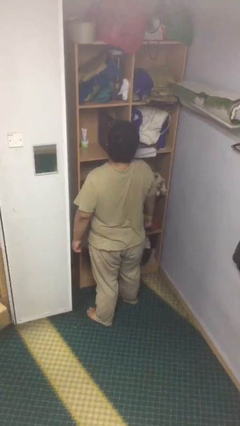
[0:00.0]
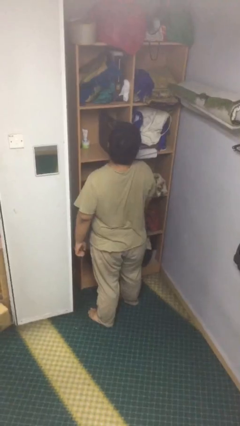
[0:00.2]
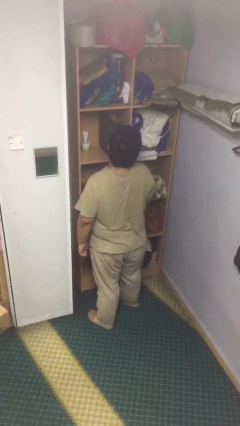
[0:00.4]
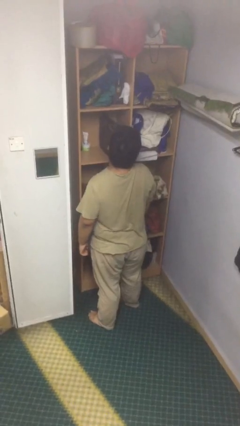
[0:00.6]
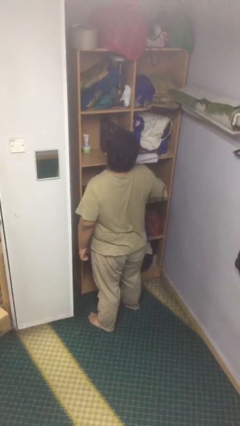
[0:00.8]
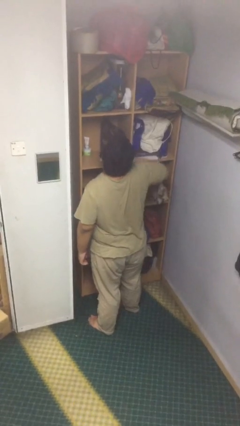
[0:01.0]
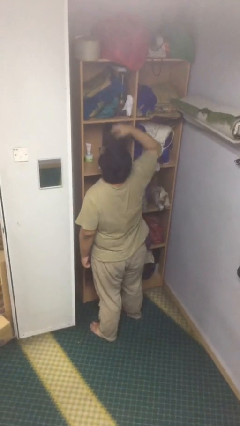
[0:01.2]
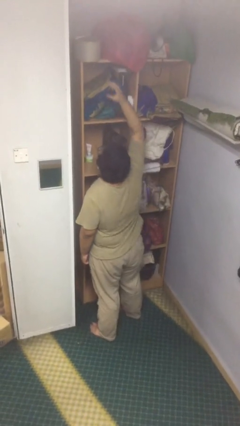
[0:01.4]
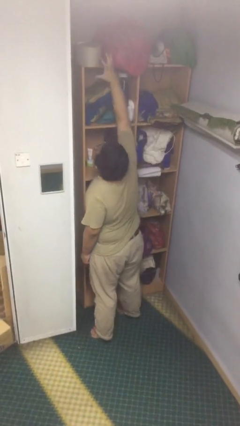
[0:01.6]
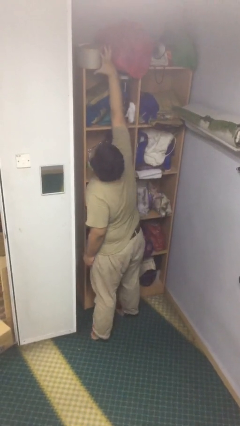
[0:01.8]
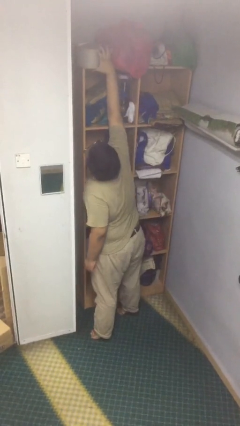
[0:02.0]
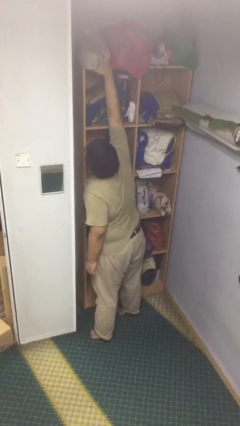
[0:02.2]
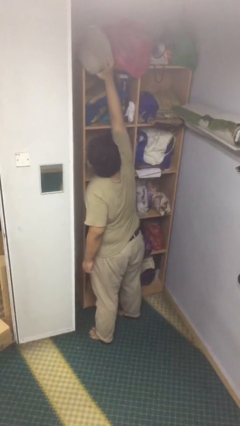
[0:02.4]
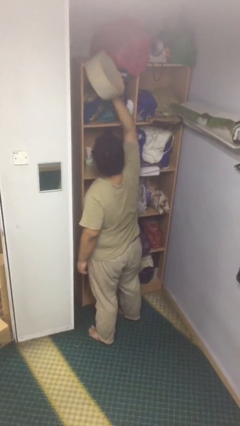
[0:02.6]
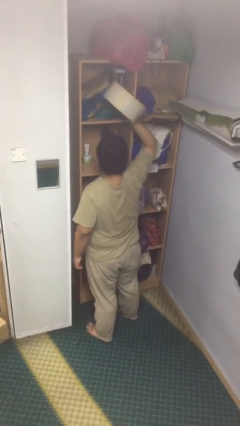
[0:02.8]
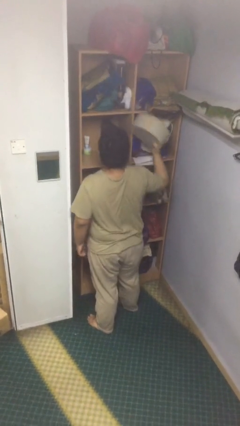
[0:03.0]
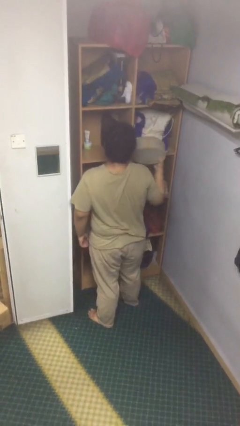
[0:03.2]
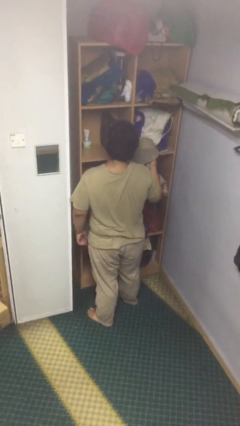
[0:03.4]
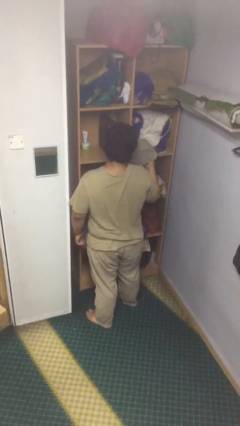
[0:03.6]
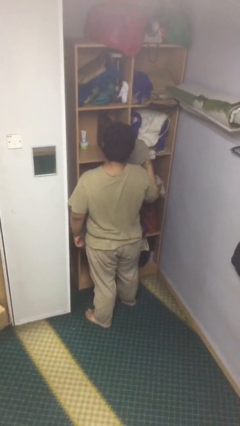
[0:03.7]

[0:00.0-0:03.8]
person picks up object from shelf

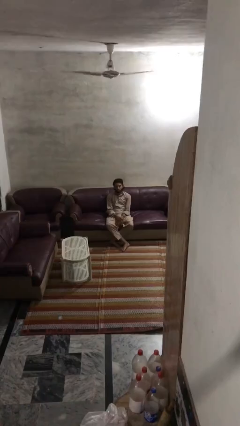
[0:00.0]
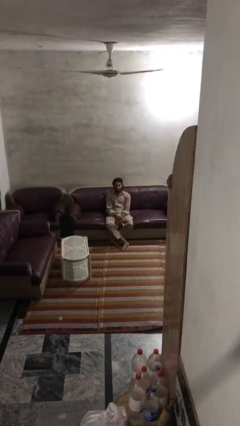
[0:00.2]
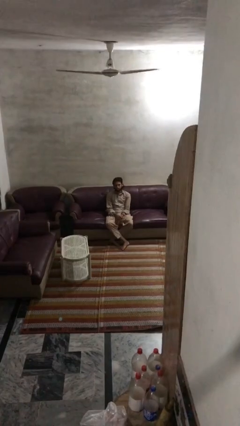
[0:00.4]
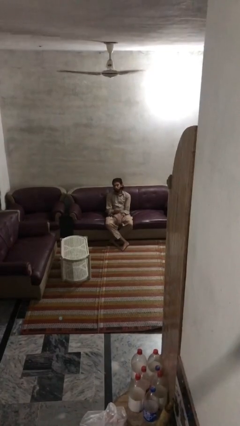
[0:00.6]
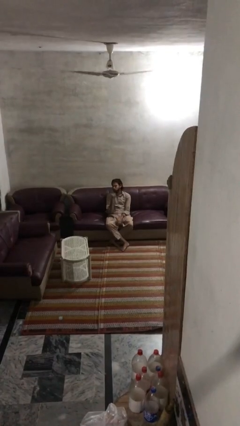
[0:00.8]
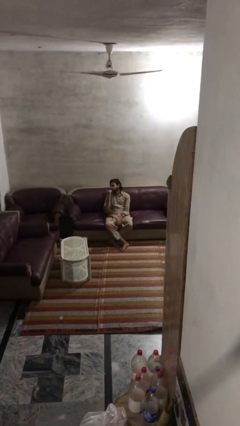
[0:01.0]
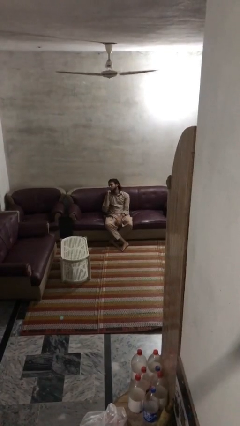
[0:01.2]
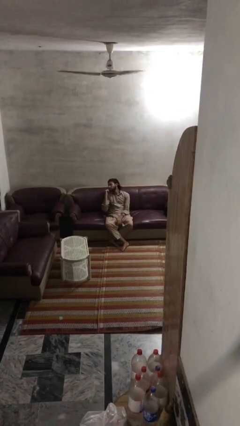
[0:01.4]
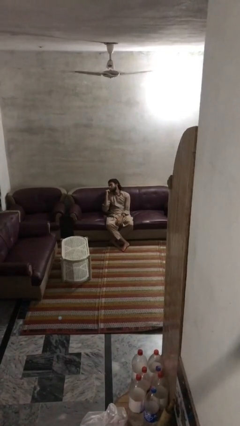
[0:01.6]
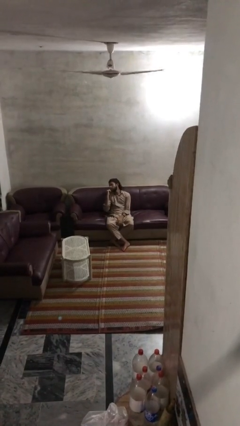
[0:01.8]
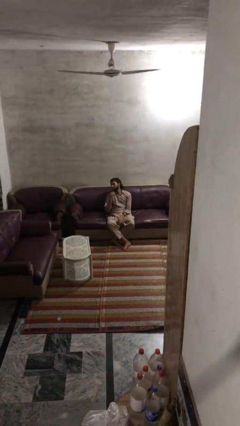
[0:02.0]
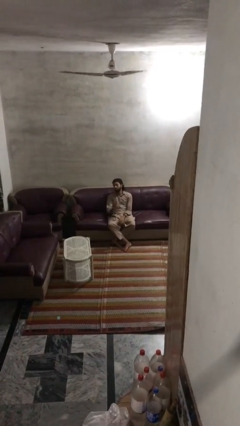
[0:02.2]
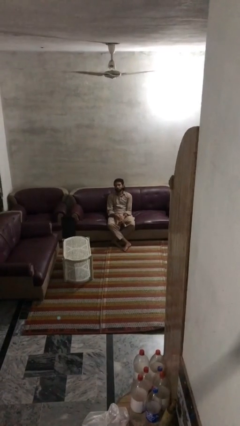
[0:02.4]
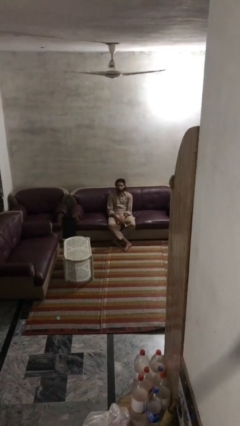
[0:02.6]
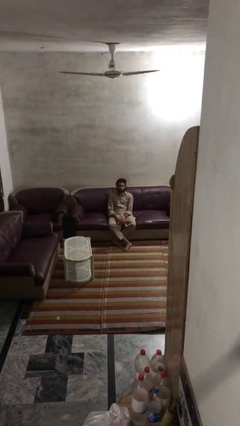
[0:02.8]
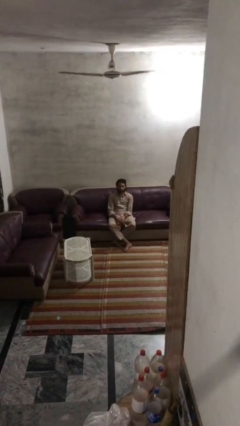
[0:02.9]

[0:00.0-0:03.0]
person gestures behind me

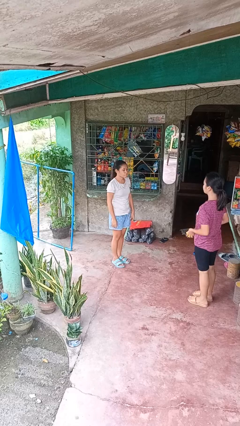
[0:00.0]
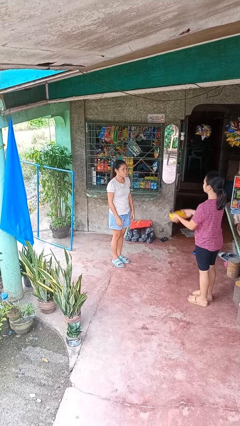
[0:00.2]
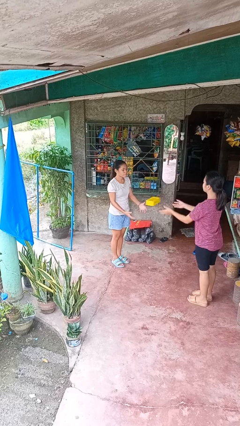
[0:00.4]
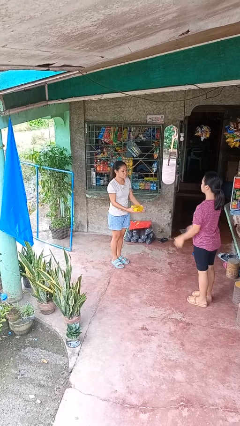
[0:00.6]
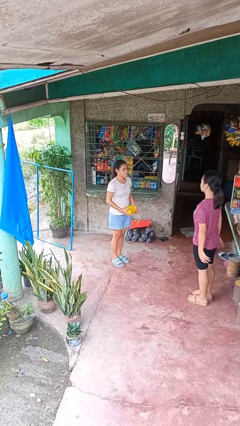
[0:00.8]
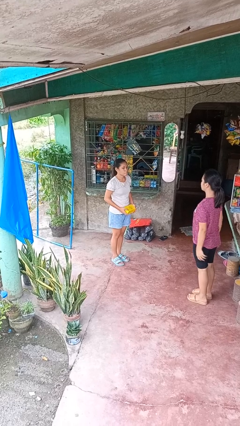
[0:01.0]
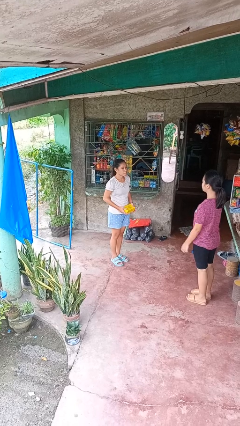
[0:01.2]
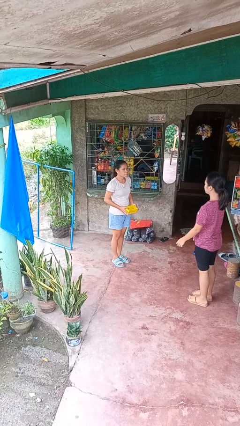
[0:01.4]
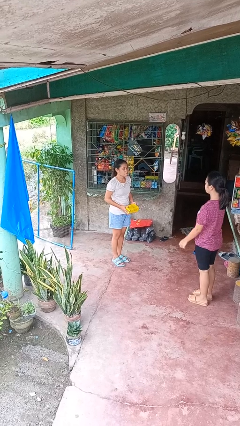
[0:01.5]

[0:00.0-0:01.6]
person catches object from person

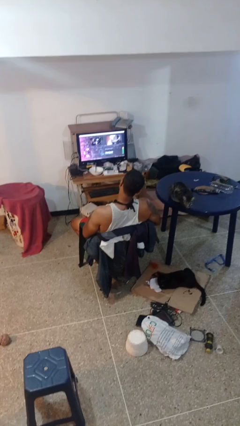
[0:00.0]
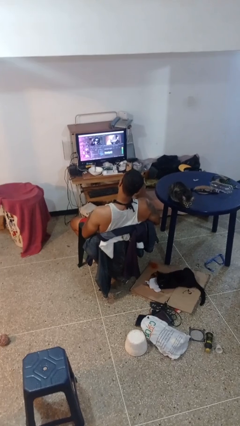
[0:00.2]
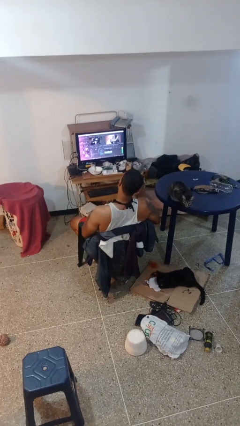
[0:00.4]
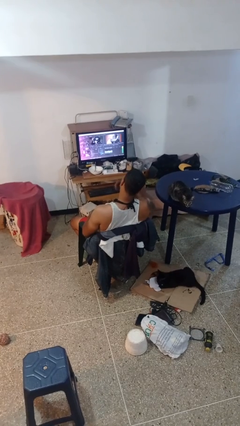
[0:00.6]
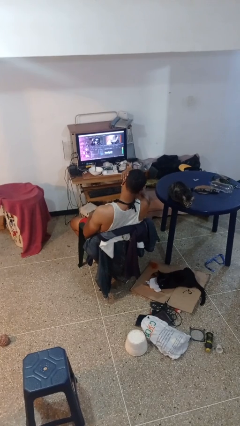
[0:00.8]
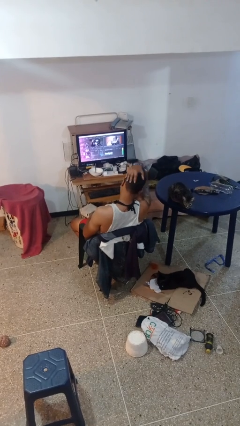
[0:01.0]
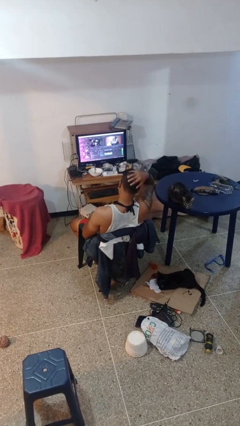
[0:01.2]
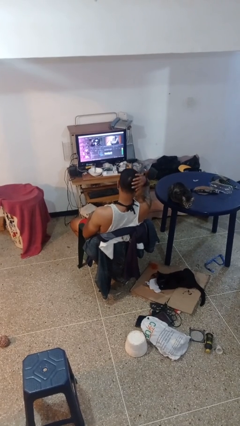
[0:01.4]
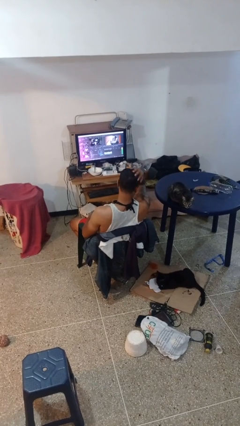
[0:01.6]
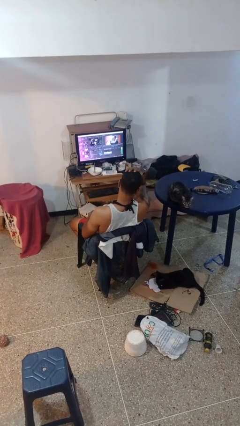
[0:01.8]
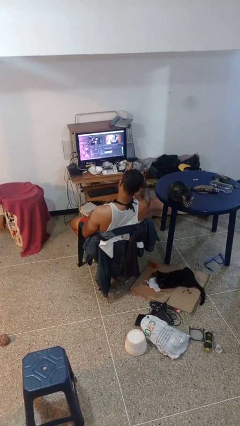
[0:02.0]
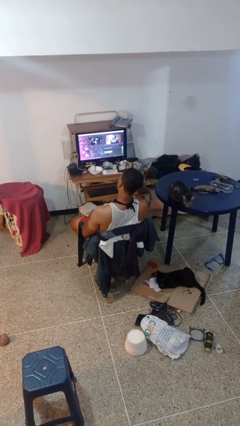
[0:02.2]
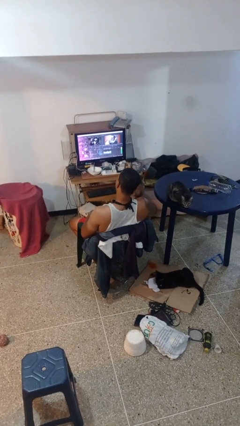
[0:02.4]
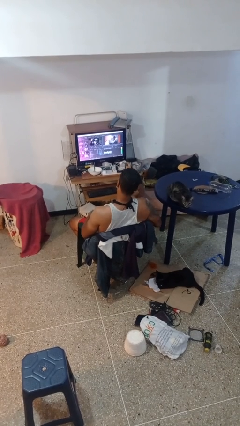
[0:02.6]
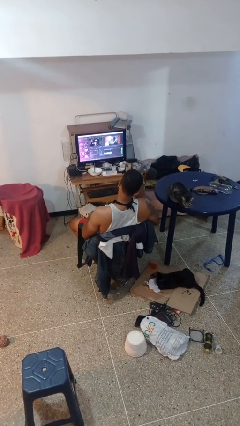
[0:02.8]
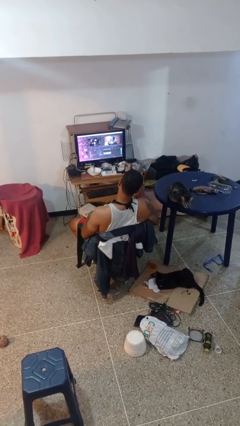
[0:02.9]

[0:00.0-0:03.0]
person strokes hair

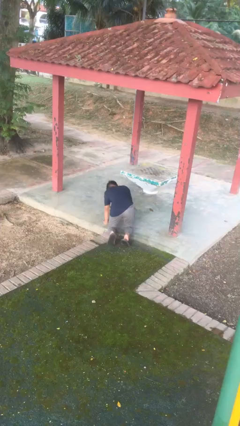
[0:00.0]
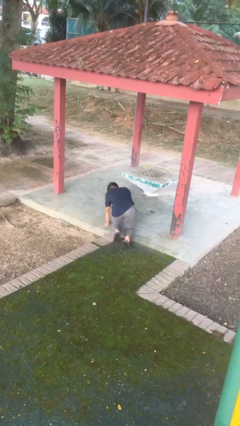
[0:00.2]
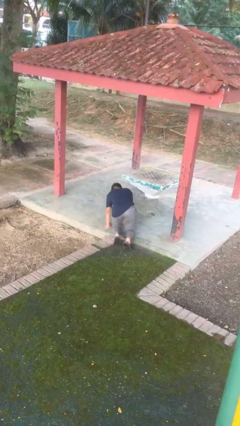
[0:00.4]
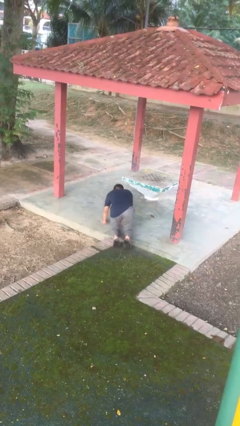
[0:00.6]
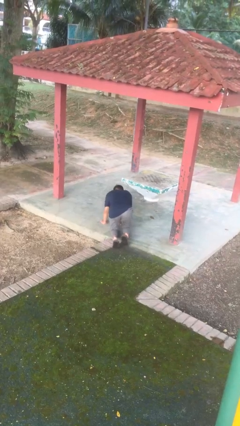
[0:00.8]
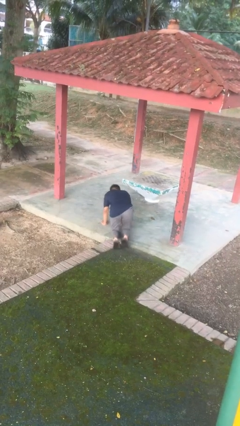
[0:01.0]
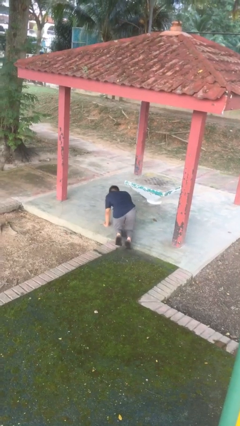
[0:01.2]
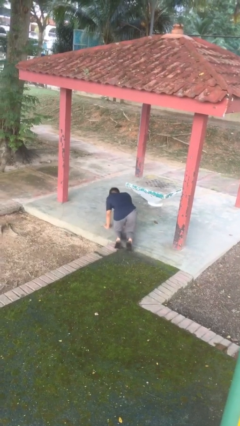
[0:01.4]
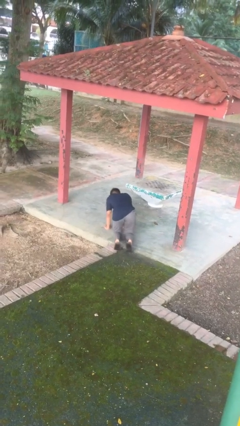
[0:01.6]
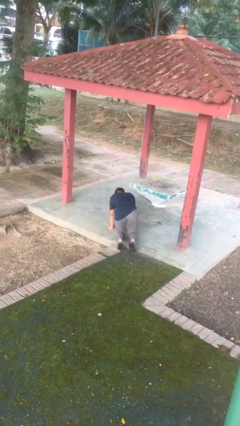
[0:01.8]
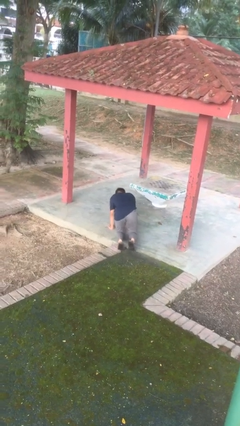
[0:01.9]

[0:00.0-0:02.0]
person crawls

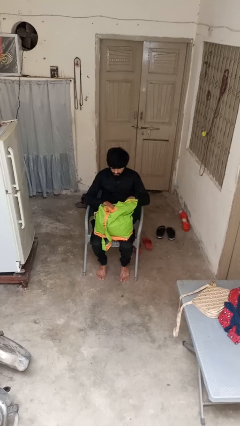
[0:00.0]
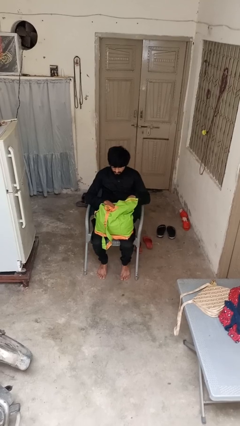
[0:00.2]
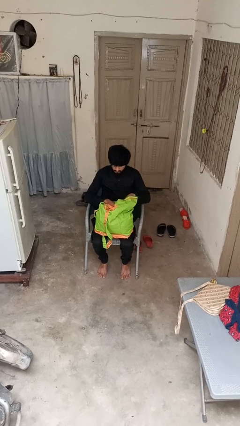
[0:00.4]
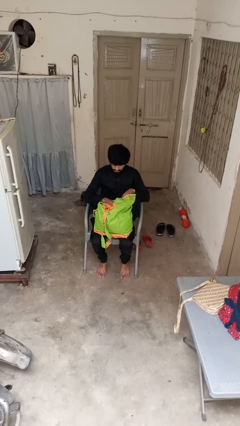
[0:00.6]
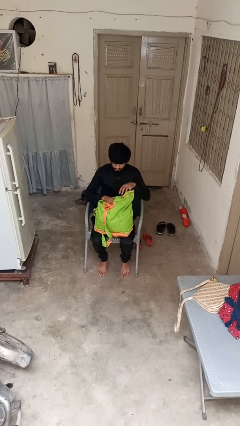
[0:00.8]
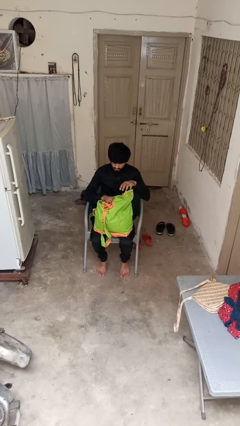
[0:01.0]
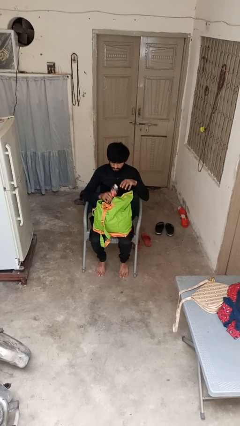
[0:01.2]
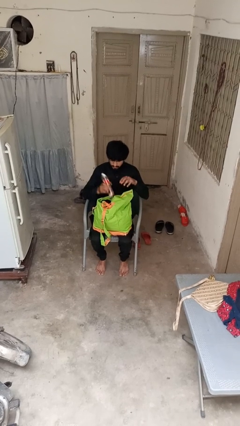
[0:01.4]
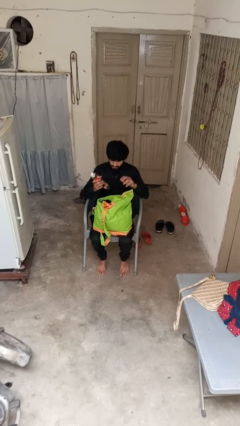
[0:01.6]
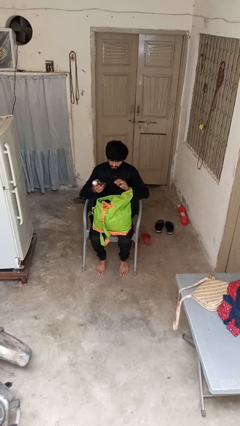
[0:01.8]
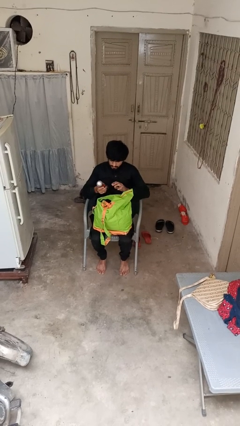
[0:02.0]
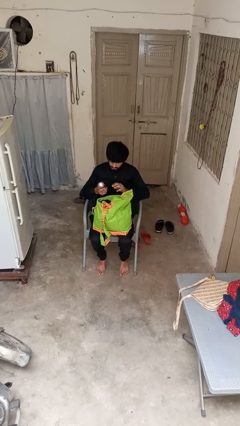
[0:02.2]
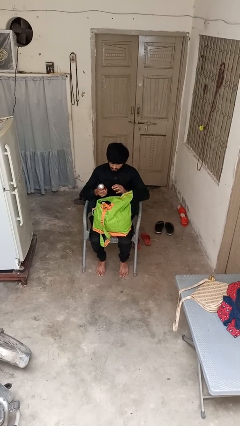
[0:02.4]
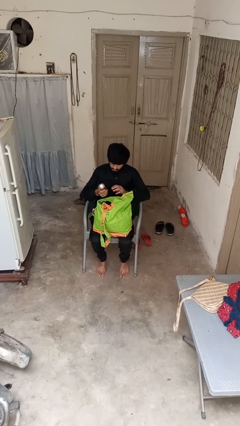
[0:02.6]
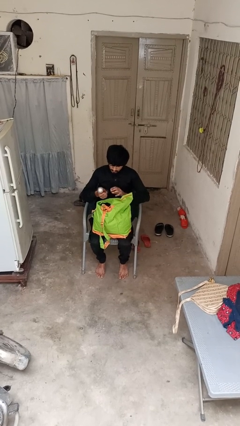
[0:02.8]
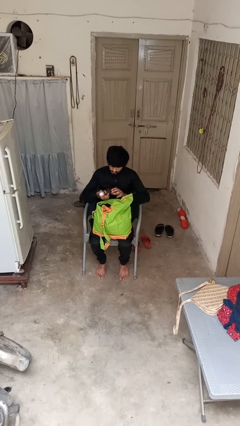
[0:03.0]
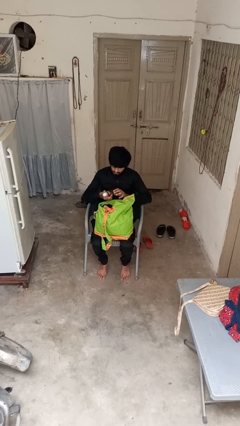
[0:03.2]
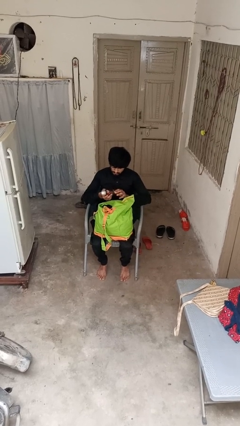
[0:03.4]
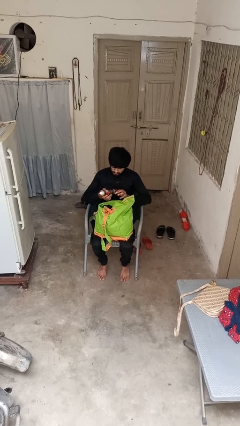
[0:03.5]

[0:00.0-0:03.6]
person takes object from backpack

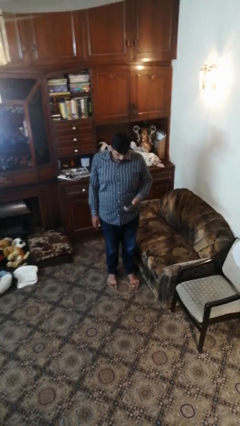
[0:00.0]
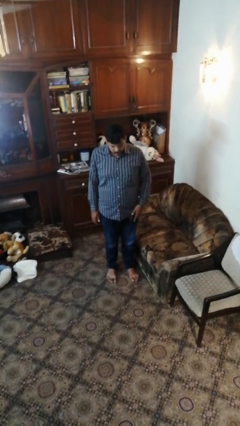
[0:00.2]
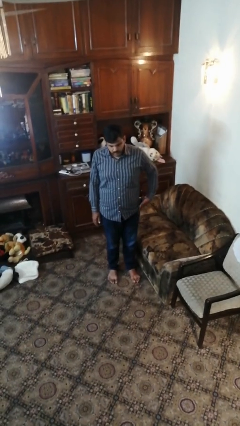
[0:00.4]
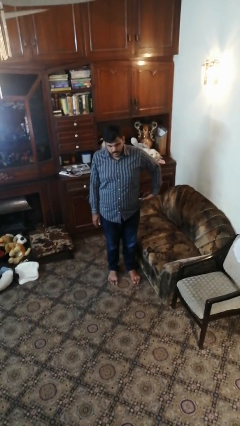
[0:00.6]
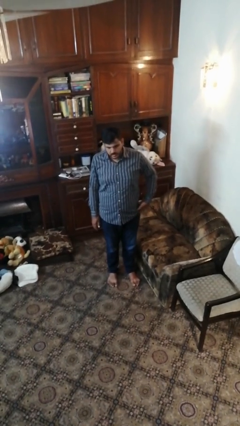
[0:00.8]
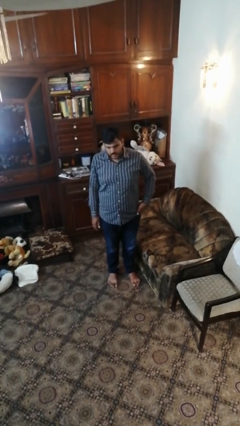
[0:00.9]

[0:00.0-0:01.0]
person puts phone into pocket
